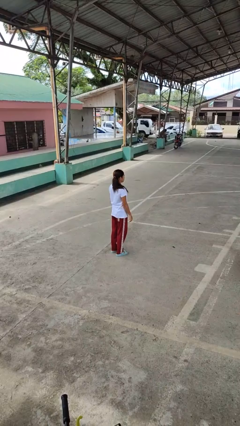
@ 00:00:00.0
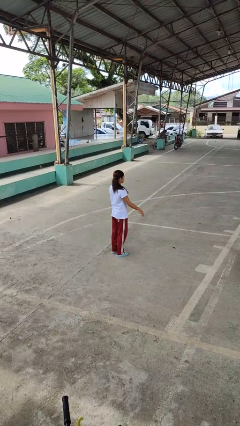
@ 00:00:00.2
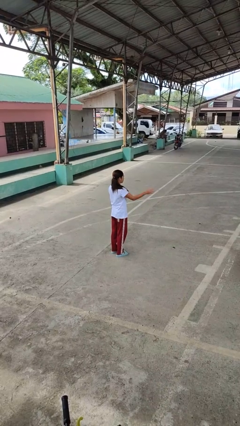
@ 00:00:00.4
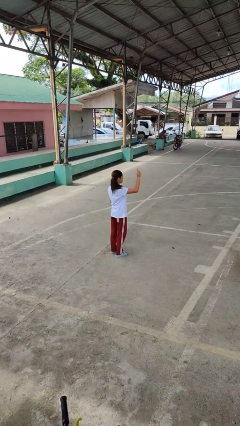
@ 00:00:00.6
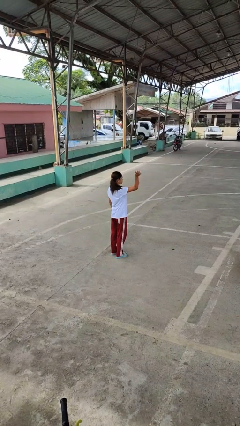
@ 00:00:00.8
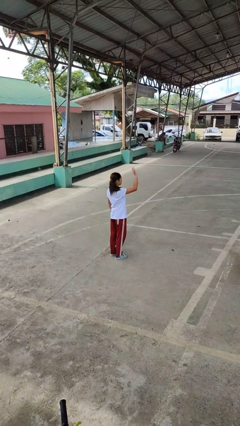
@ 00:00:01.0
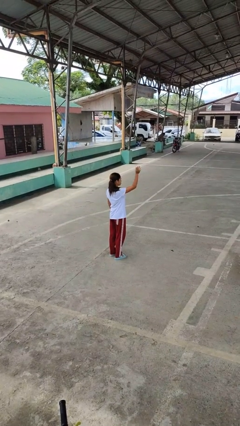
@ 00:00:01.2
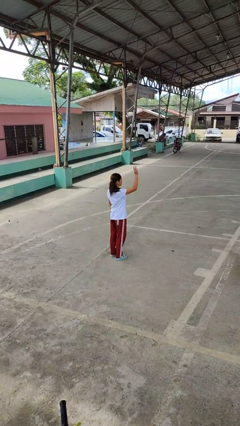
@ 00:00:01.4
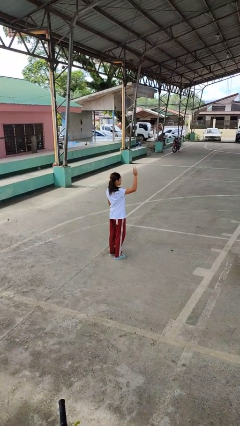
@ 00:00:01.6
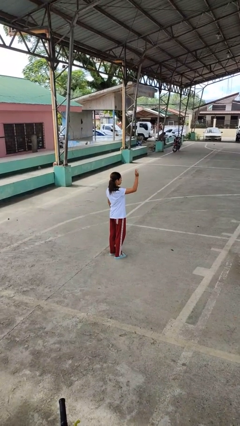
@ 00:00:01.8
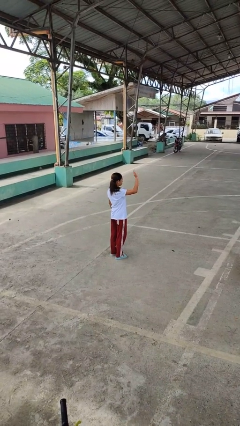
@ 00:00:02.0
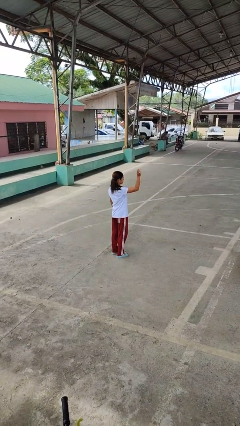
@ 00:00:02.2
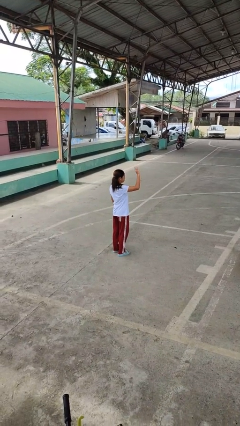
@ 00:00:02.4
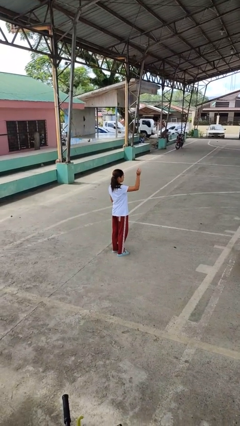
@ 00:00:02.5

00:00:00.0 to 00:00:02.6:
person waves at person

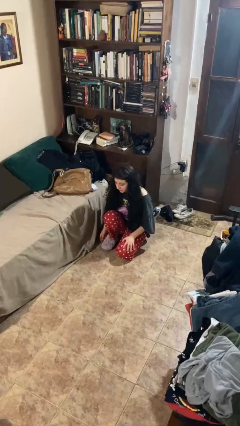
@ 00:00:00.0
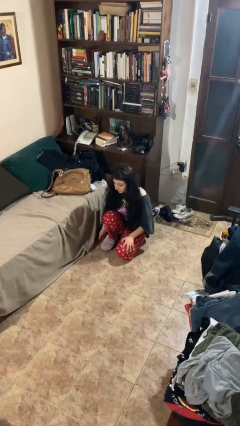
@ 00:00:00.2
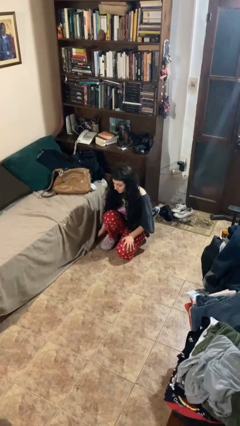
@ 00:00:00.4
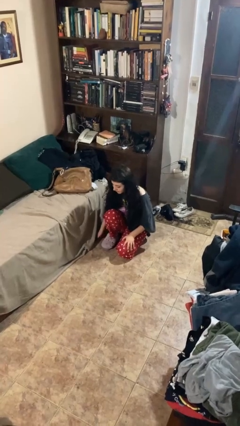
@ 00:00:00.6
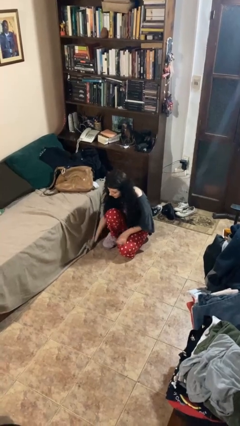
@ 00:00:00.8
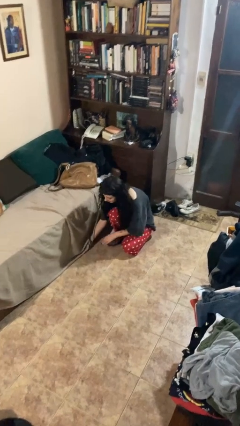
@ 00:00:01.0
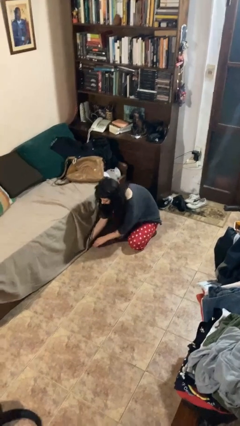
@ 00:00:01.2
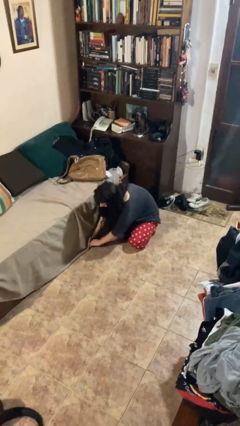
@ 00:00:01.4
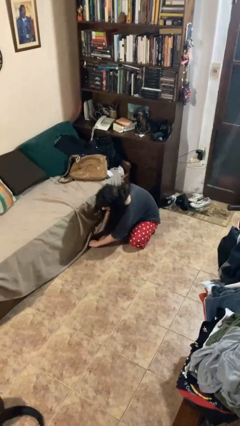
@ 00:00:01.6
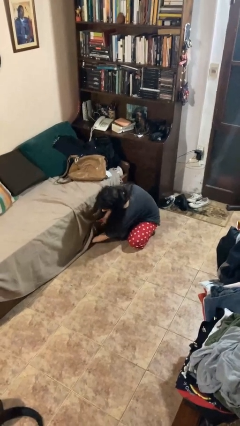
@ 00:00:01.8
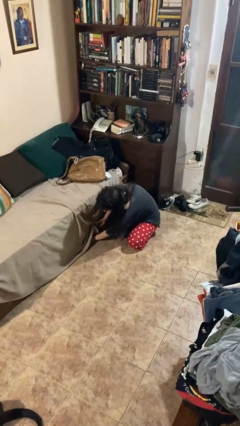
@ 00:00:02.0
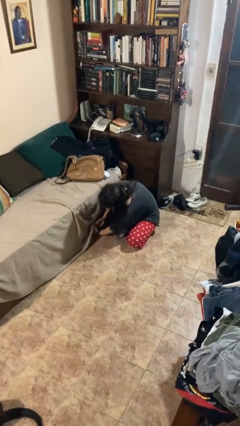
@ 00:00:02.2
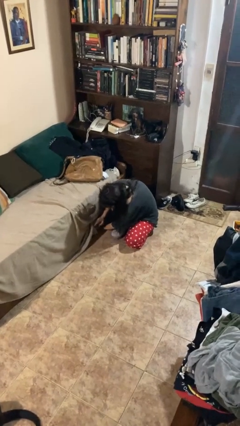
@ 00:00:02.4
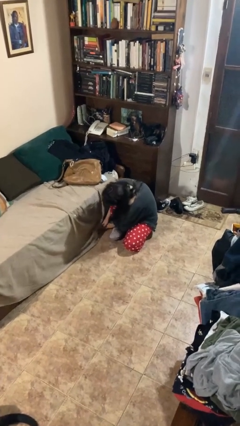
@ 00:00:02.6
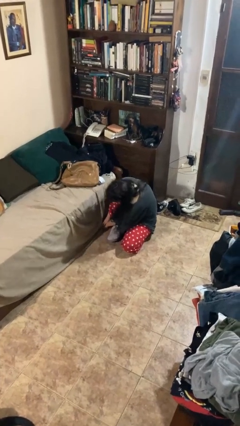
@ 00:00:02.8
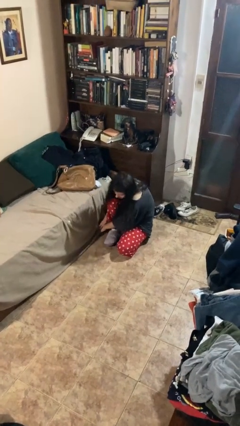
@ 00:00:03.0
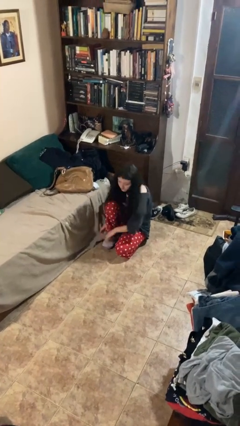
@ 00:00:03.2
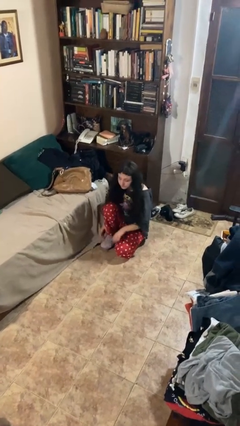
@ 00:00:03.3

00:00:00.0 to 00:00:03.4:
person searches under couch

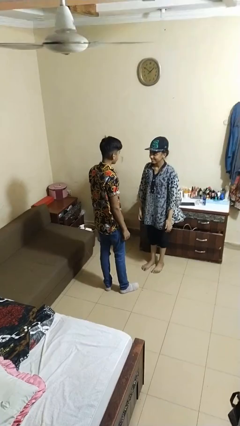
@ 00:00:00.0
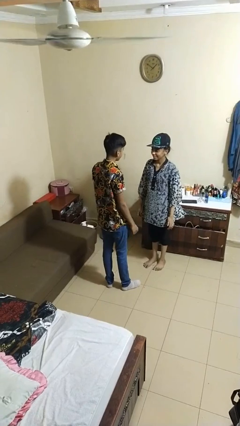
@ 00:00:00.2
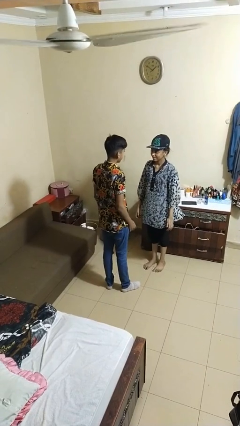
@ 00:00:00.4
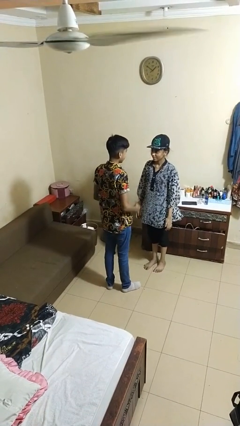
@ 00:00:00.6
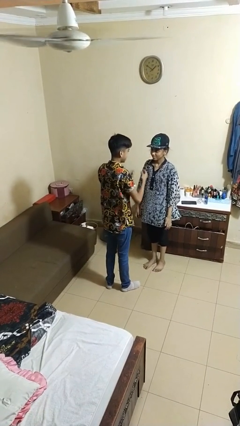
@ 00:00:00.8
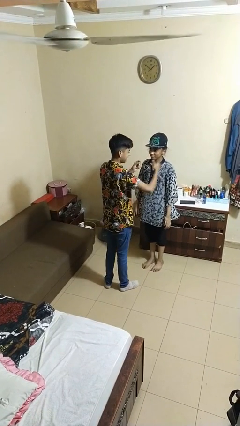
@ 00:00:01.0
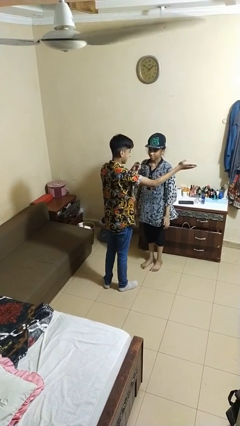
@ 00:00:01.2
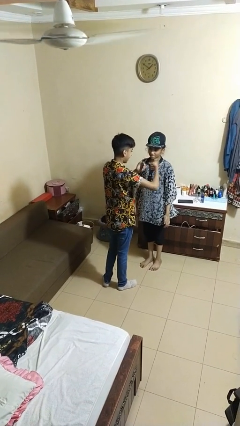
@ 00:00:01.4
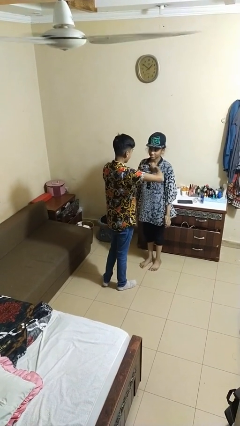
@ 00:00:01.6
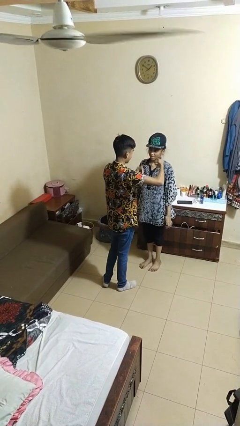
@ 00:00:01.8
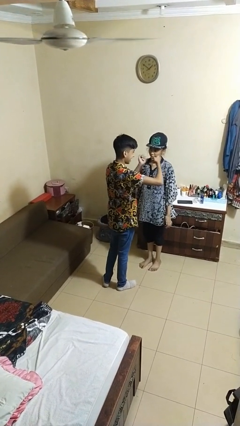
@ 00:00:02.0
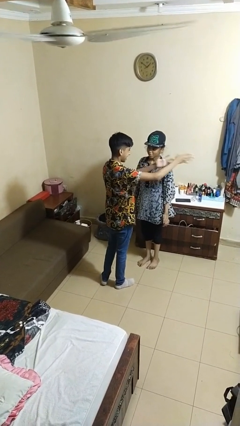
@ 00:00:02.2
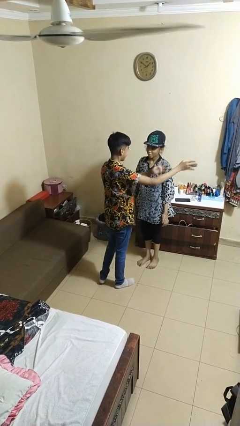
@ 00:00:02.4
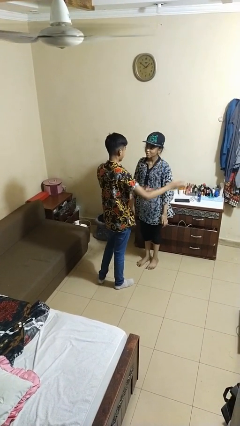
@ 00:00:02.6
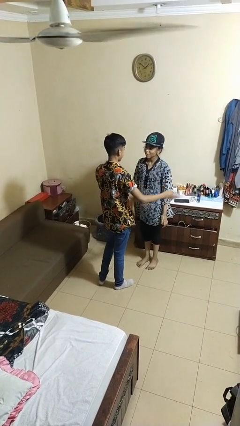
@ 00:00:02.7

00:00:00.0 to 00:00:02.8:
person shoves person

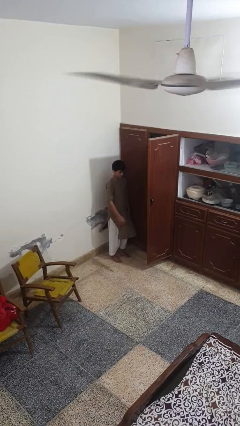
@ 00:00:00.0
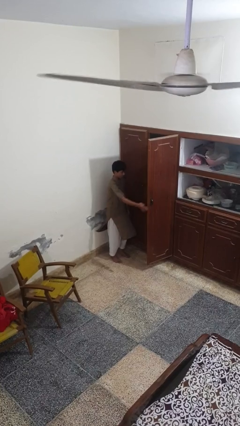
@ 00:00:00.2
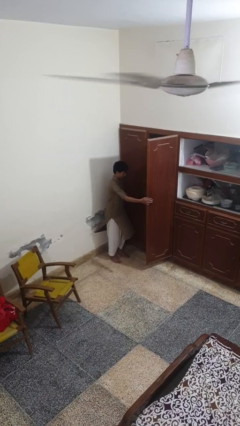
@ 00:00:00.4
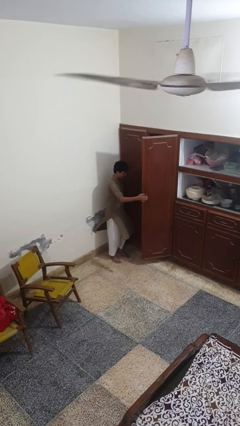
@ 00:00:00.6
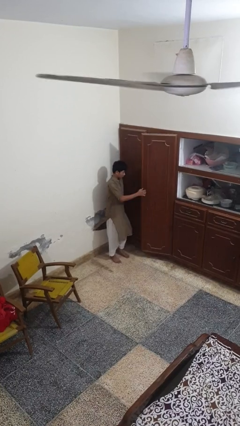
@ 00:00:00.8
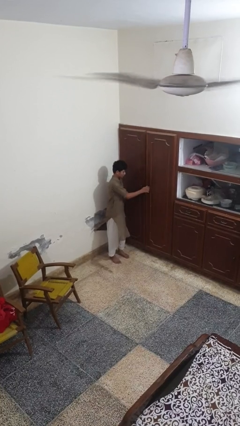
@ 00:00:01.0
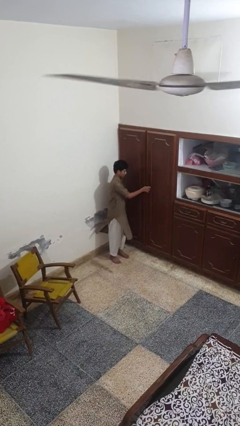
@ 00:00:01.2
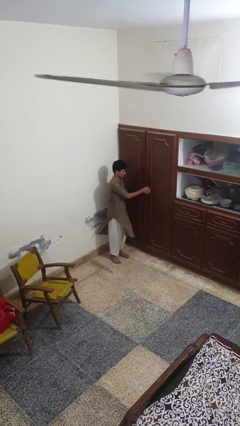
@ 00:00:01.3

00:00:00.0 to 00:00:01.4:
person closes closet door

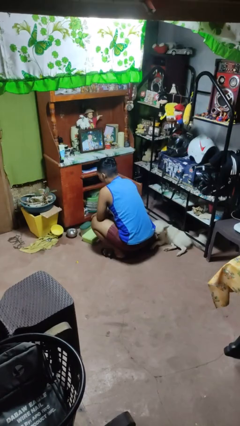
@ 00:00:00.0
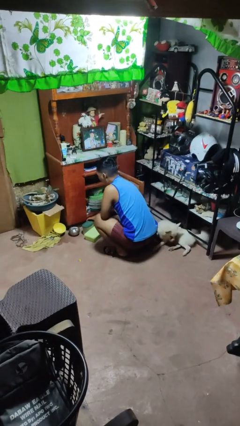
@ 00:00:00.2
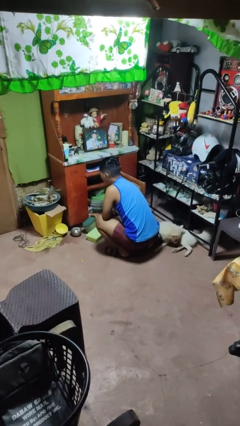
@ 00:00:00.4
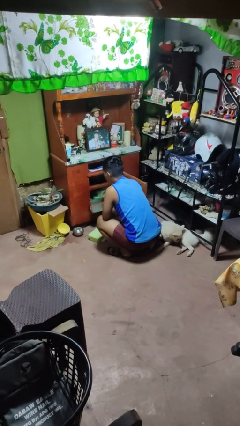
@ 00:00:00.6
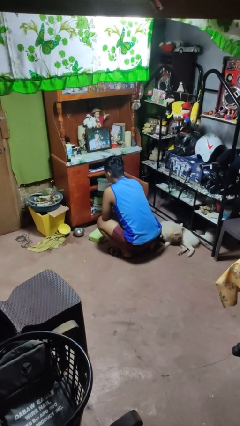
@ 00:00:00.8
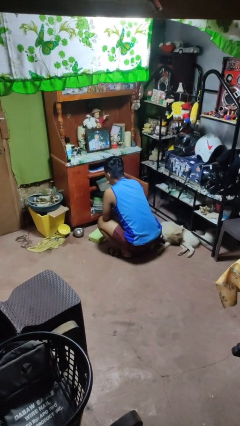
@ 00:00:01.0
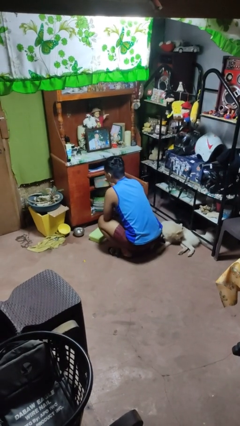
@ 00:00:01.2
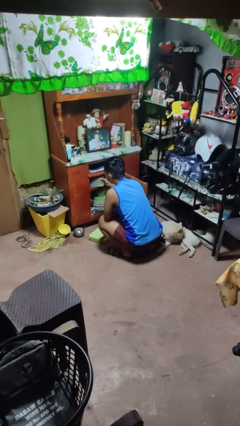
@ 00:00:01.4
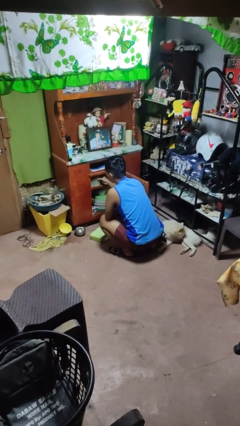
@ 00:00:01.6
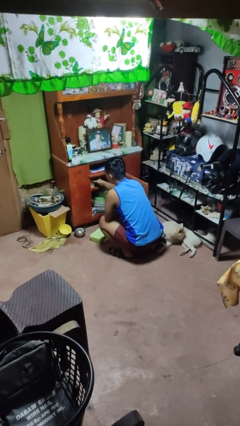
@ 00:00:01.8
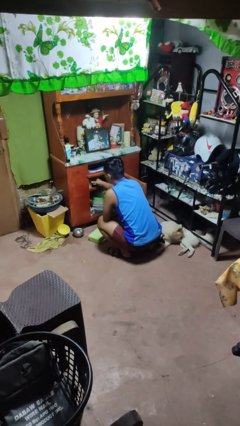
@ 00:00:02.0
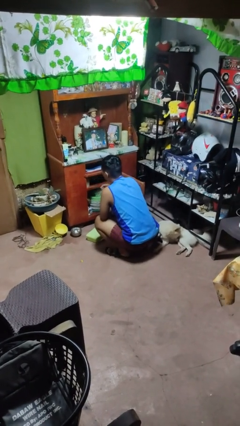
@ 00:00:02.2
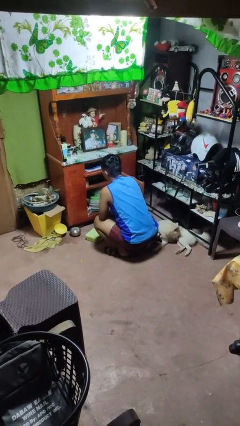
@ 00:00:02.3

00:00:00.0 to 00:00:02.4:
person puts object in cabinet

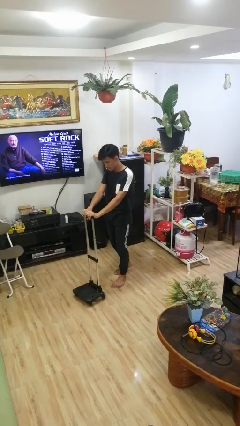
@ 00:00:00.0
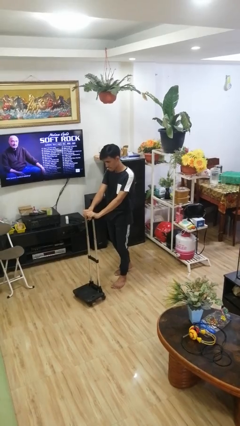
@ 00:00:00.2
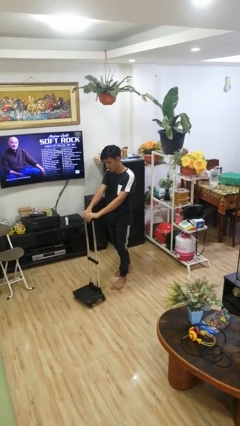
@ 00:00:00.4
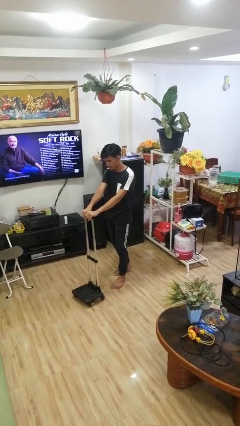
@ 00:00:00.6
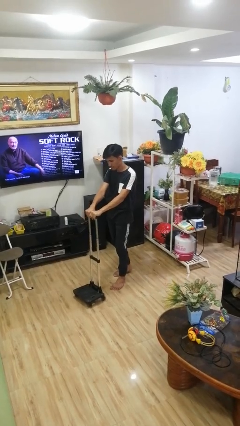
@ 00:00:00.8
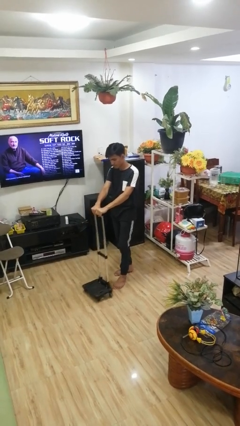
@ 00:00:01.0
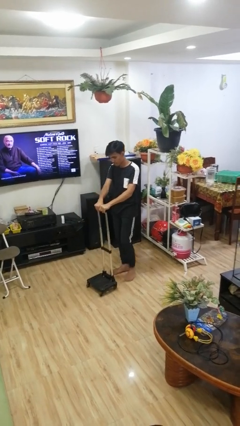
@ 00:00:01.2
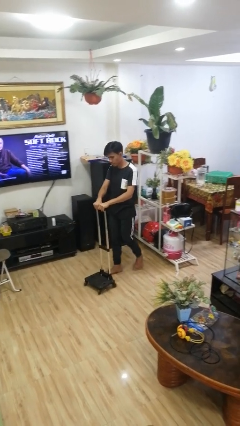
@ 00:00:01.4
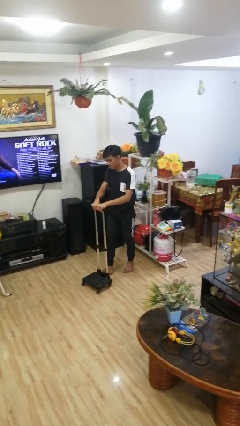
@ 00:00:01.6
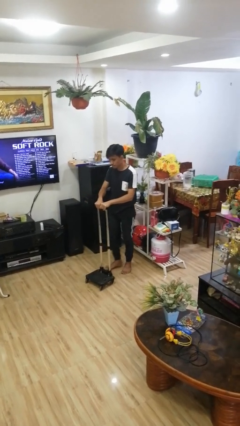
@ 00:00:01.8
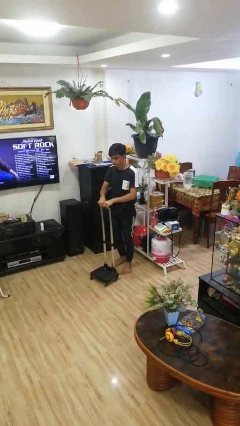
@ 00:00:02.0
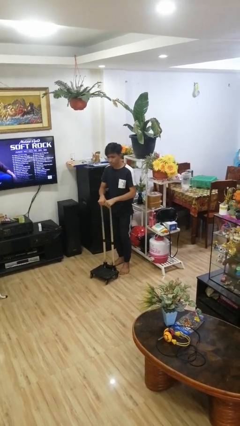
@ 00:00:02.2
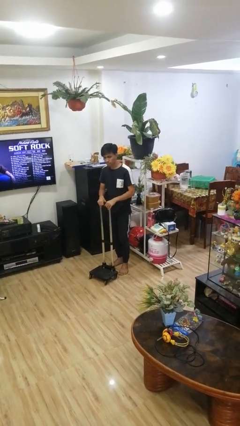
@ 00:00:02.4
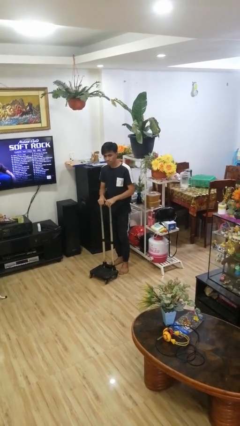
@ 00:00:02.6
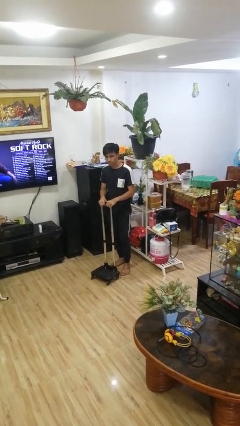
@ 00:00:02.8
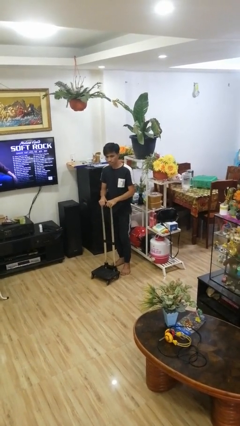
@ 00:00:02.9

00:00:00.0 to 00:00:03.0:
person pulls wheeled cart

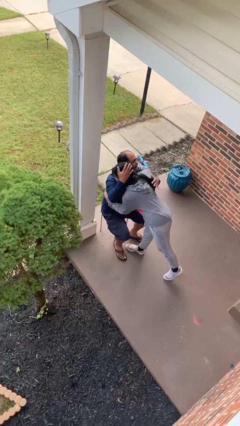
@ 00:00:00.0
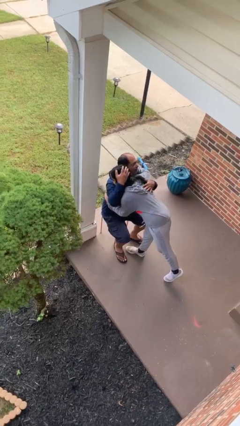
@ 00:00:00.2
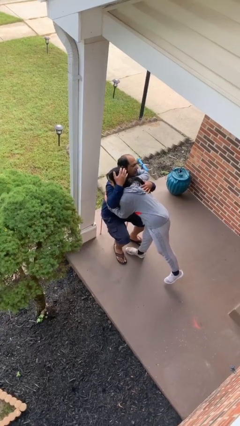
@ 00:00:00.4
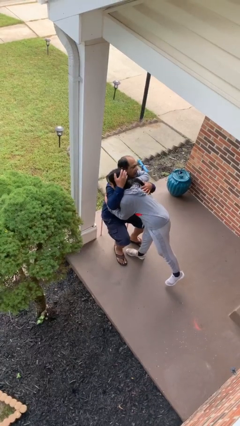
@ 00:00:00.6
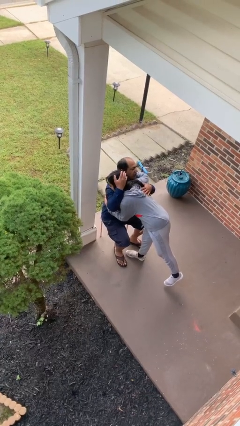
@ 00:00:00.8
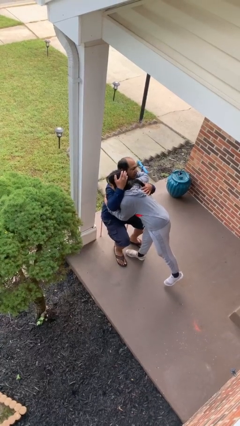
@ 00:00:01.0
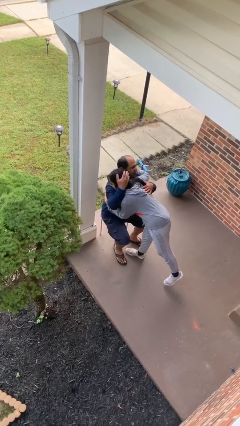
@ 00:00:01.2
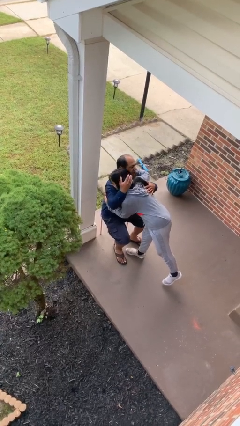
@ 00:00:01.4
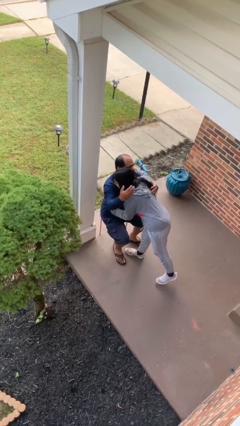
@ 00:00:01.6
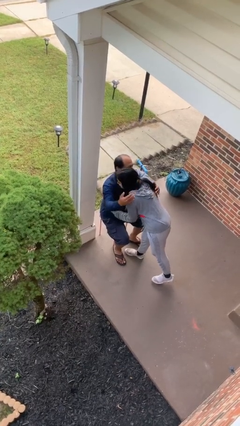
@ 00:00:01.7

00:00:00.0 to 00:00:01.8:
person embraces person
